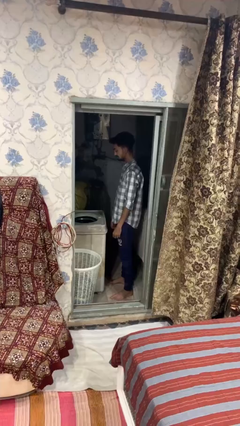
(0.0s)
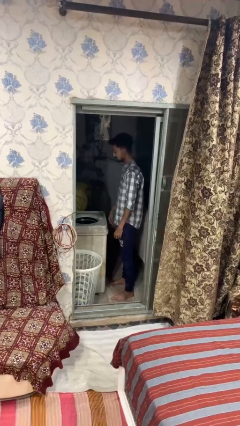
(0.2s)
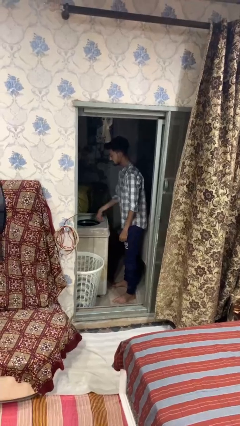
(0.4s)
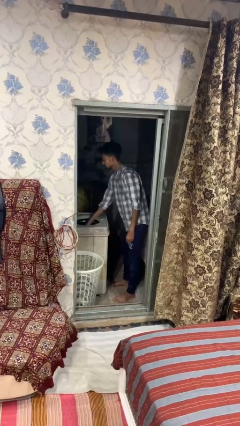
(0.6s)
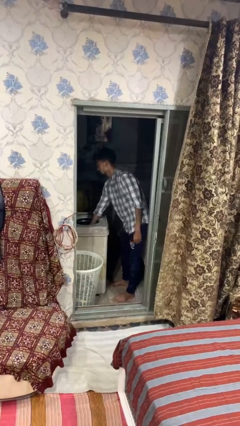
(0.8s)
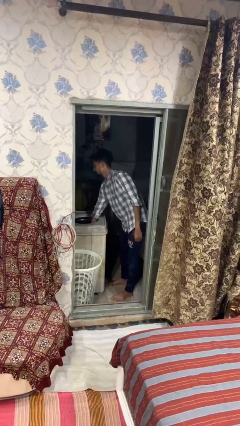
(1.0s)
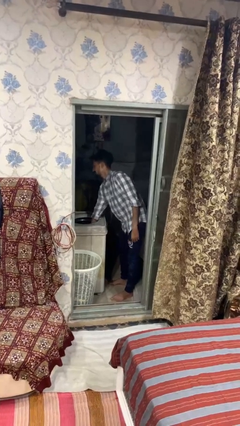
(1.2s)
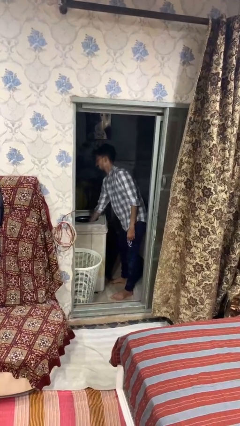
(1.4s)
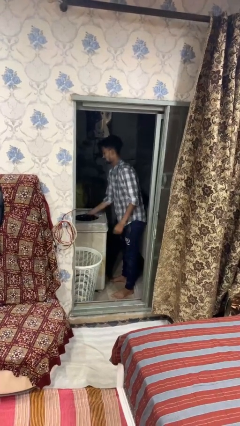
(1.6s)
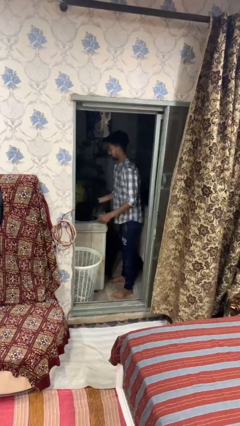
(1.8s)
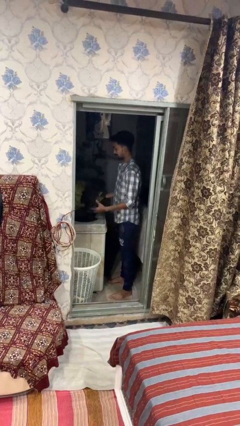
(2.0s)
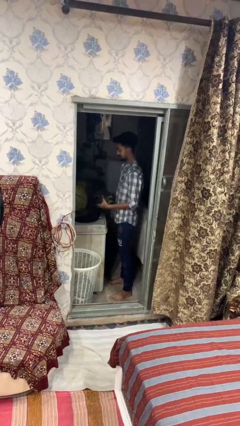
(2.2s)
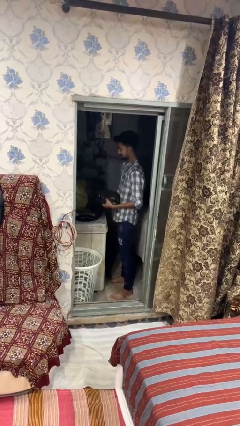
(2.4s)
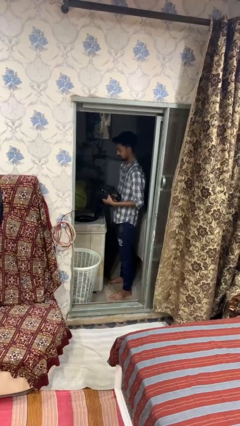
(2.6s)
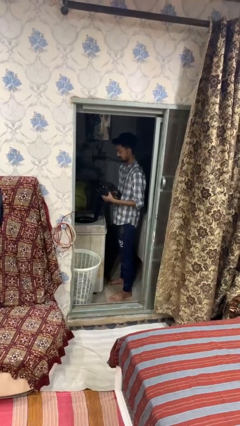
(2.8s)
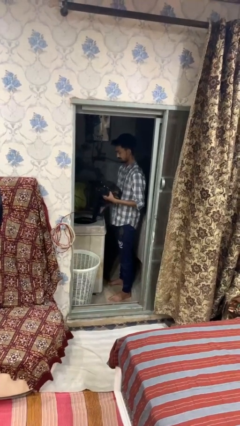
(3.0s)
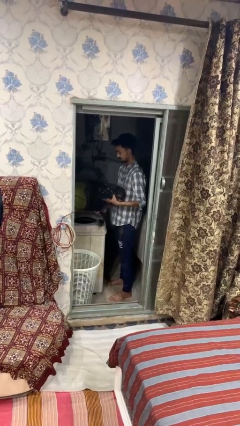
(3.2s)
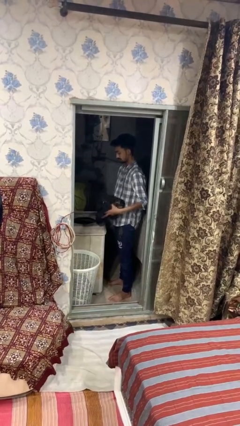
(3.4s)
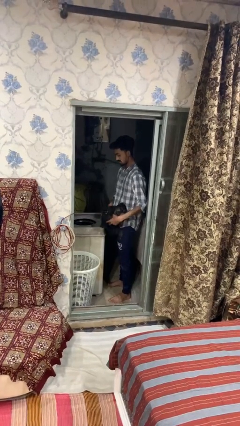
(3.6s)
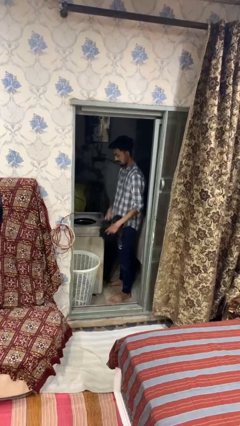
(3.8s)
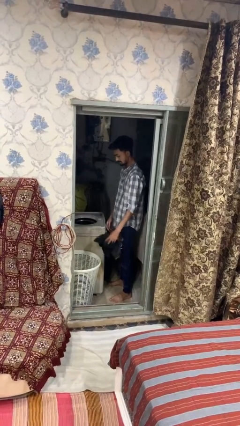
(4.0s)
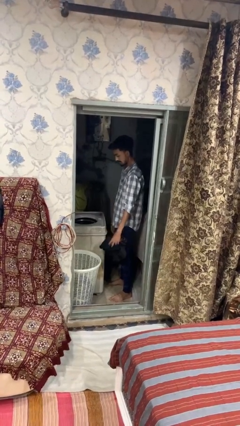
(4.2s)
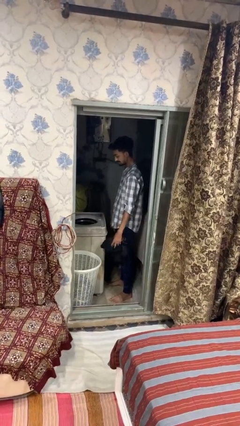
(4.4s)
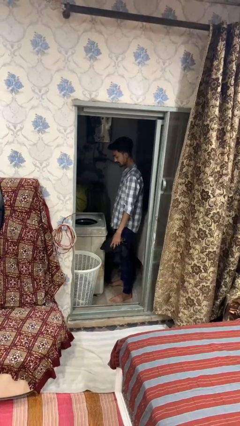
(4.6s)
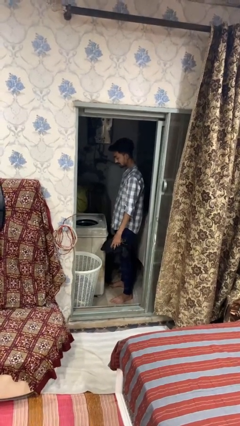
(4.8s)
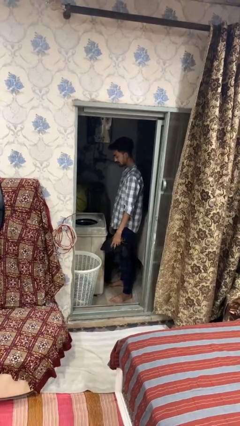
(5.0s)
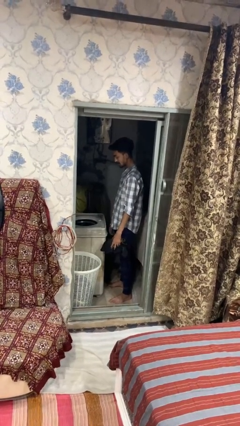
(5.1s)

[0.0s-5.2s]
person unloads dryer

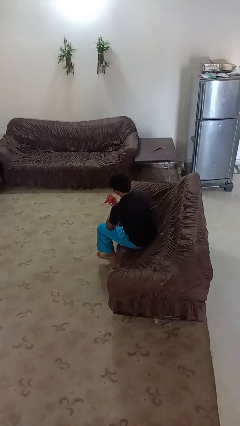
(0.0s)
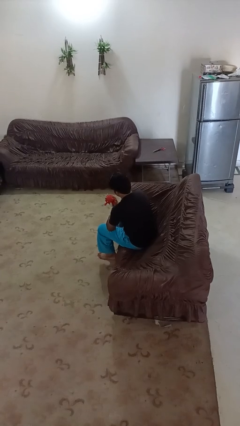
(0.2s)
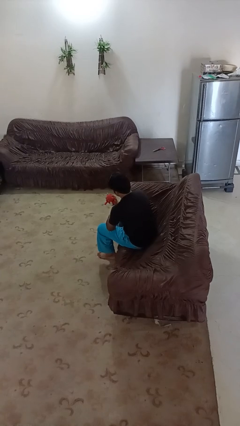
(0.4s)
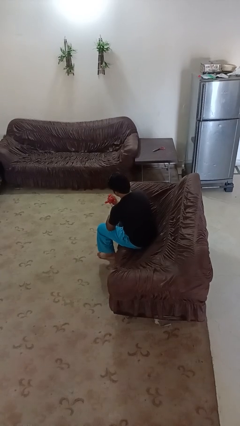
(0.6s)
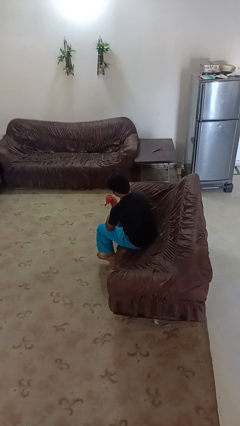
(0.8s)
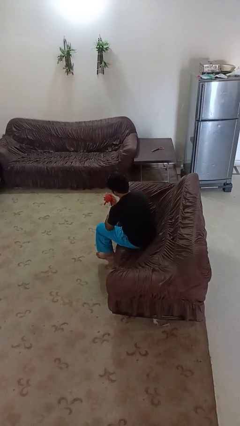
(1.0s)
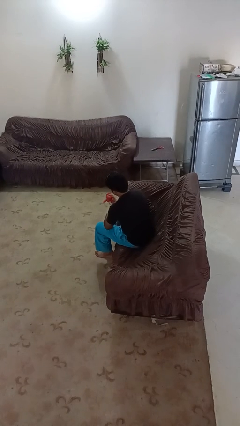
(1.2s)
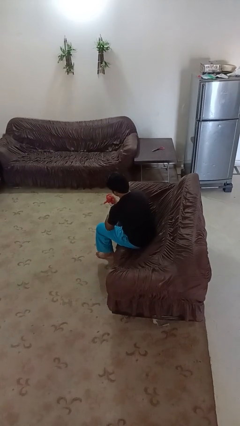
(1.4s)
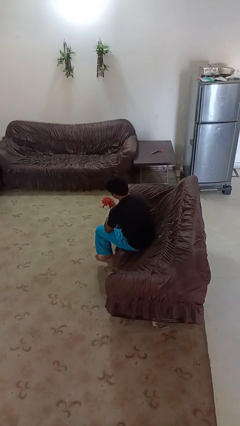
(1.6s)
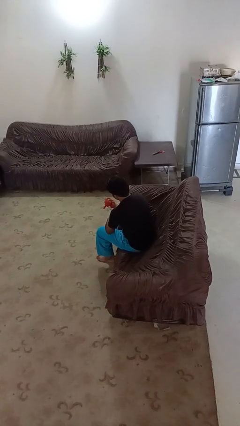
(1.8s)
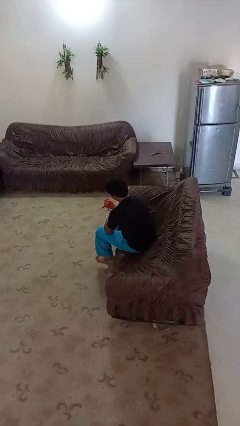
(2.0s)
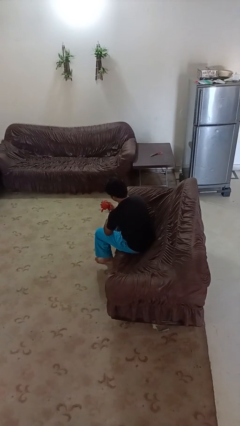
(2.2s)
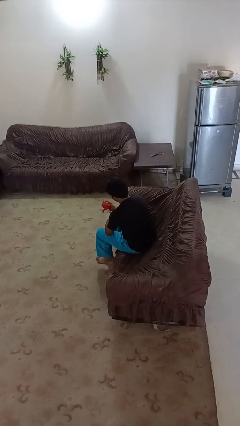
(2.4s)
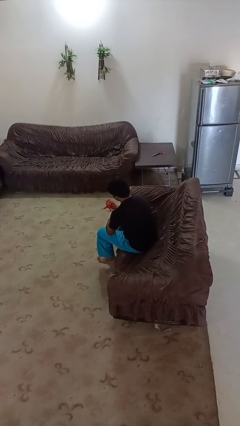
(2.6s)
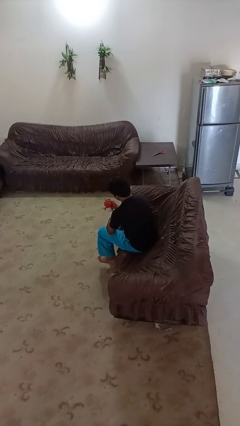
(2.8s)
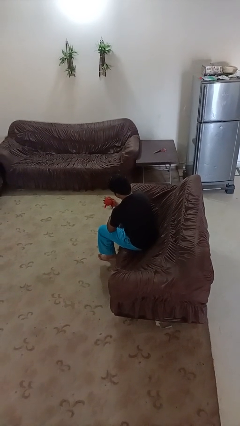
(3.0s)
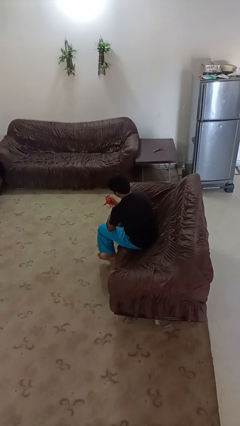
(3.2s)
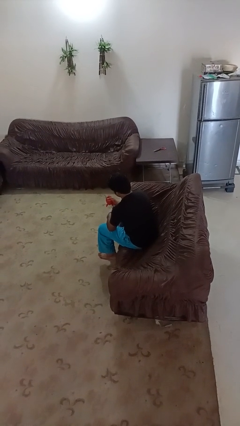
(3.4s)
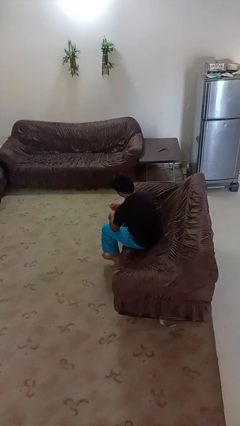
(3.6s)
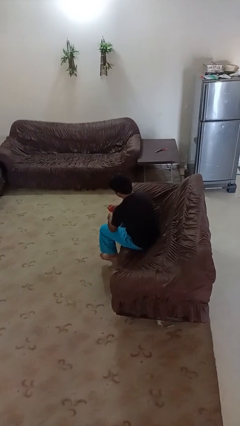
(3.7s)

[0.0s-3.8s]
person squeezes object

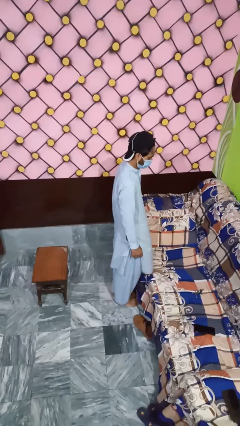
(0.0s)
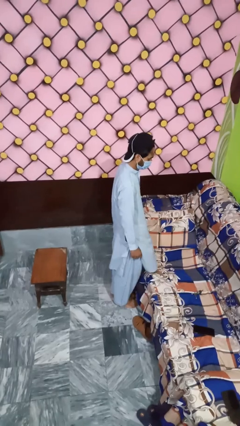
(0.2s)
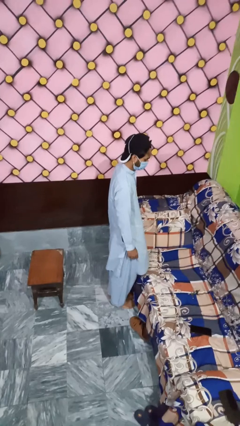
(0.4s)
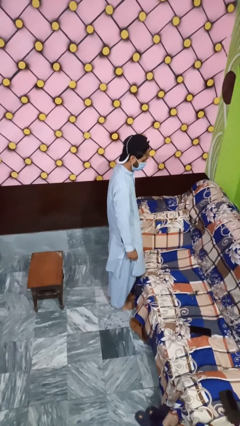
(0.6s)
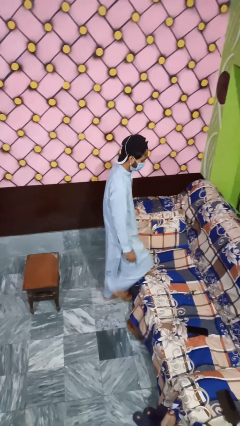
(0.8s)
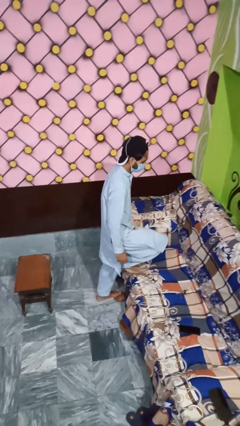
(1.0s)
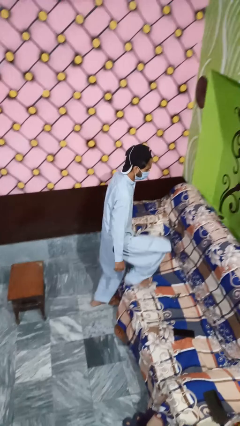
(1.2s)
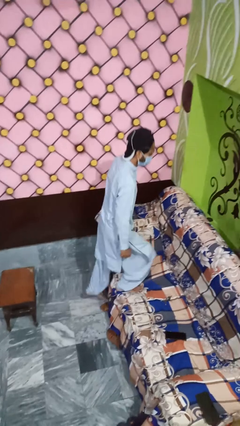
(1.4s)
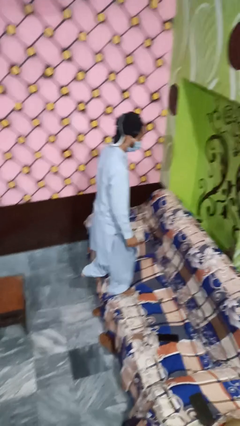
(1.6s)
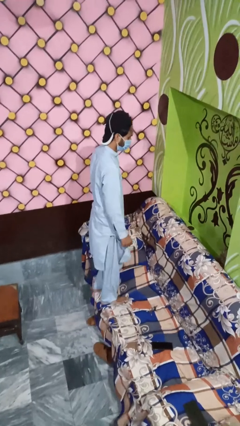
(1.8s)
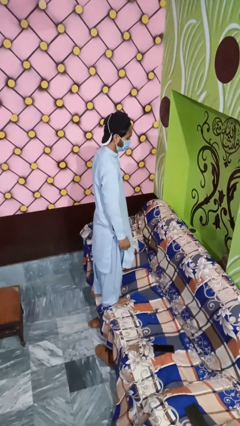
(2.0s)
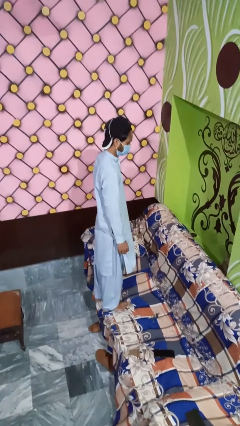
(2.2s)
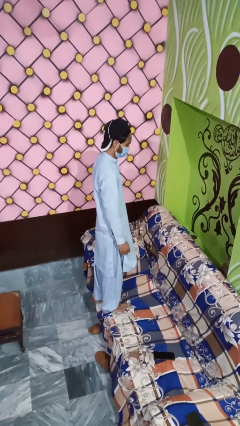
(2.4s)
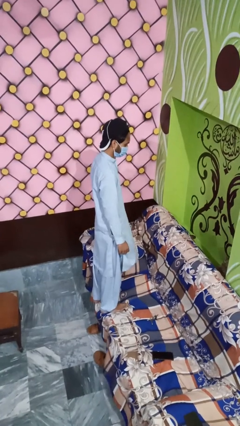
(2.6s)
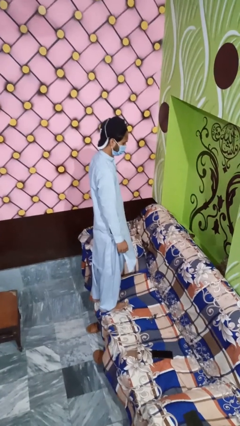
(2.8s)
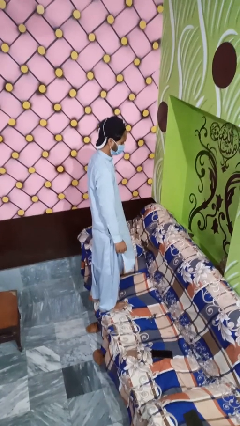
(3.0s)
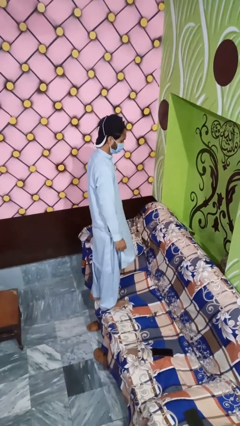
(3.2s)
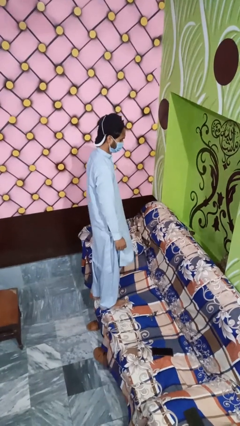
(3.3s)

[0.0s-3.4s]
person climbs on couch

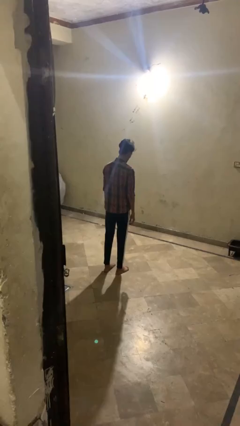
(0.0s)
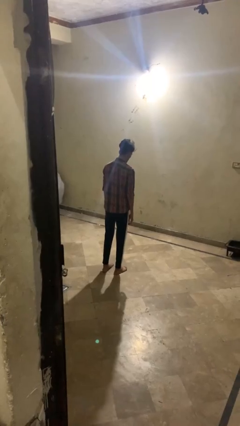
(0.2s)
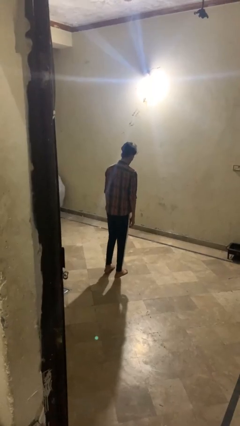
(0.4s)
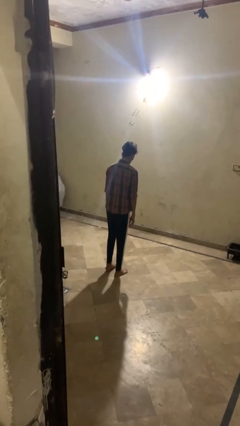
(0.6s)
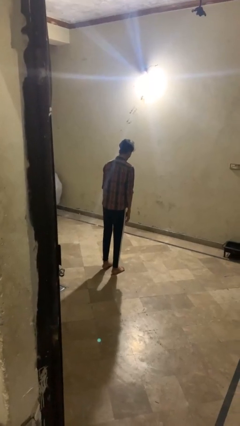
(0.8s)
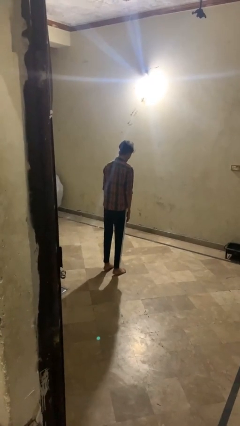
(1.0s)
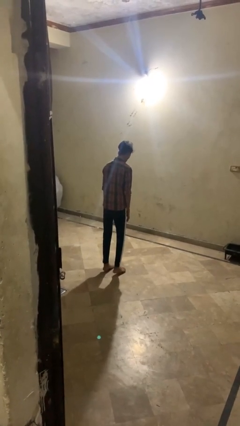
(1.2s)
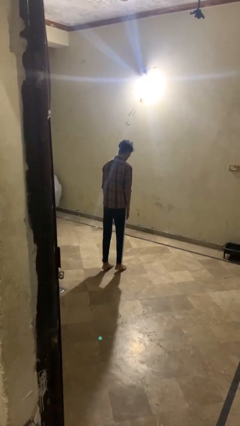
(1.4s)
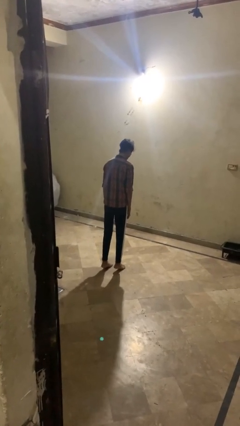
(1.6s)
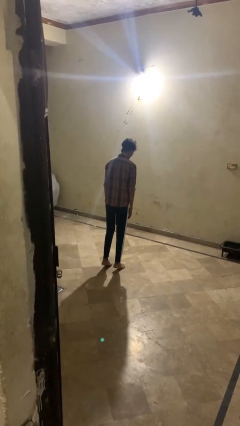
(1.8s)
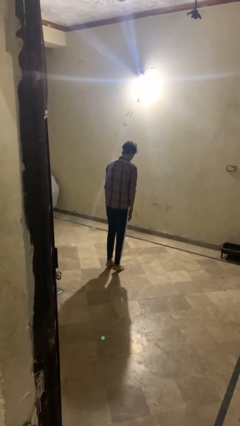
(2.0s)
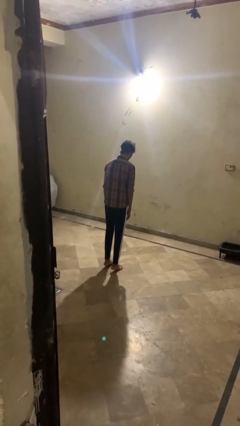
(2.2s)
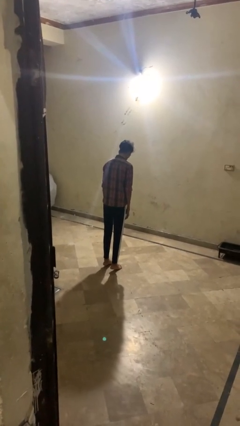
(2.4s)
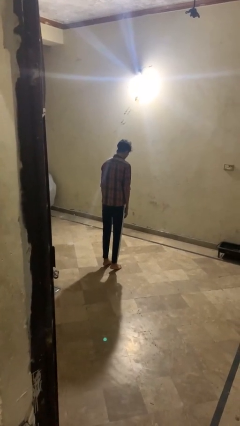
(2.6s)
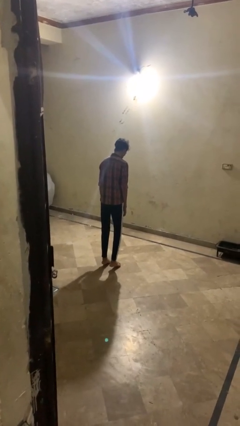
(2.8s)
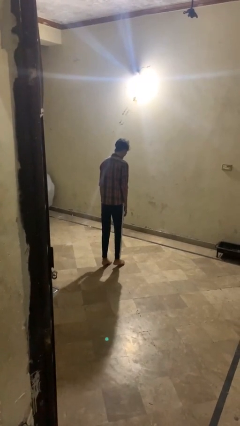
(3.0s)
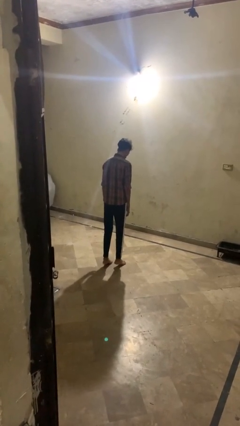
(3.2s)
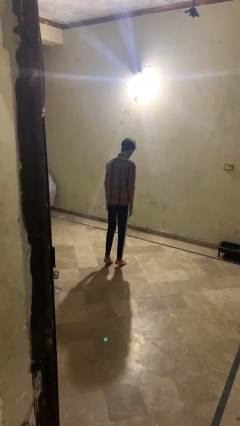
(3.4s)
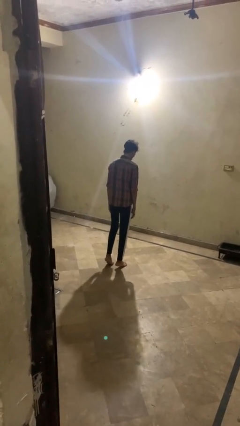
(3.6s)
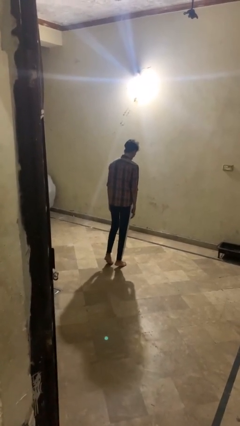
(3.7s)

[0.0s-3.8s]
person walks tiptoe

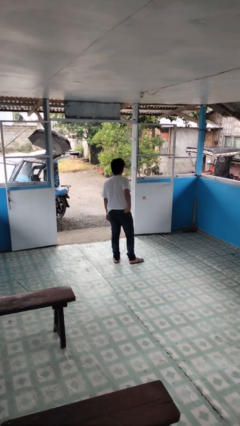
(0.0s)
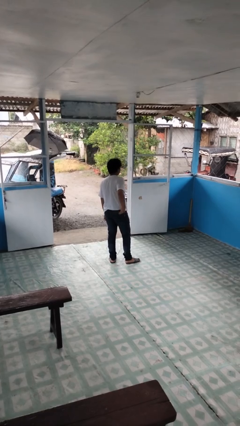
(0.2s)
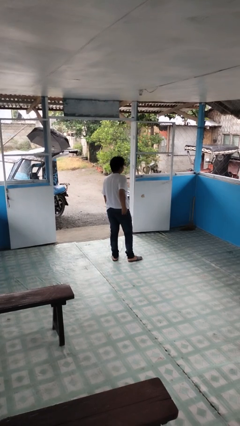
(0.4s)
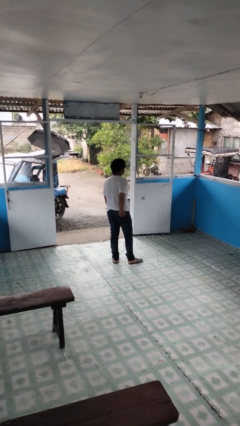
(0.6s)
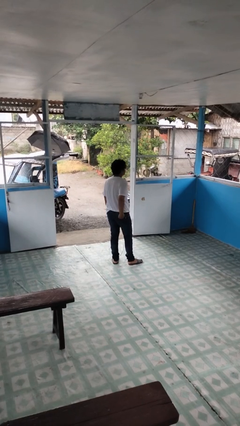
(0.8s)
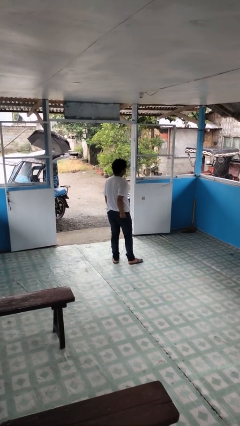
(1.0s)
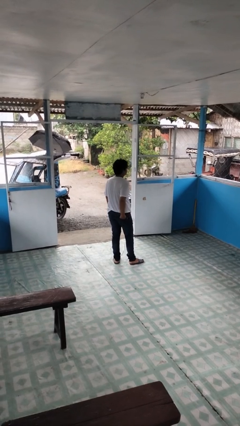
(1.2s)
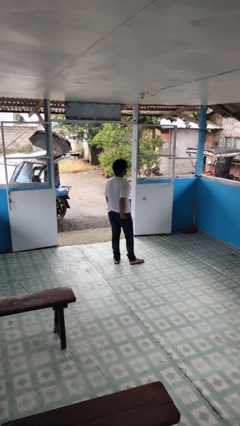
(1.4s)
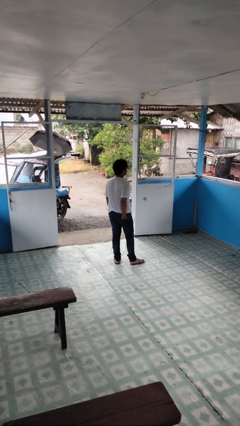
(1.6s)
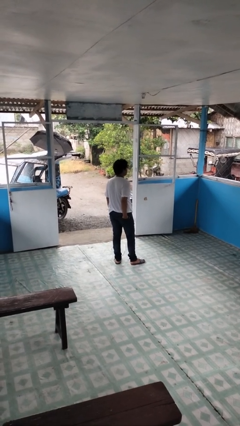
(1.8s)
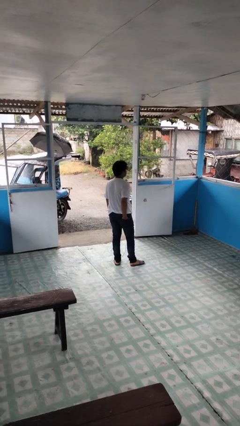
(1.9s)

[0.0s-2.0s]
person puts hands in back pockets
